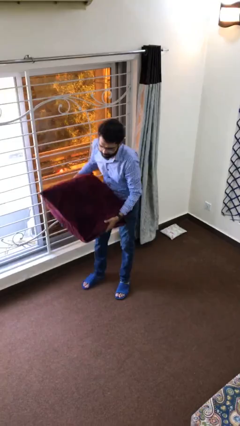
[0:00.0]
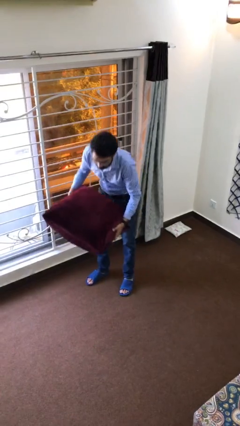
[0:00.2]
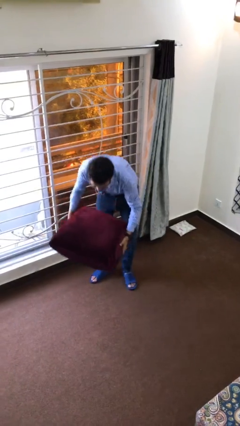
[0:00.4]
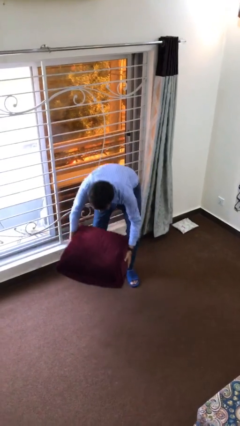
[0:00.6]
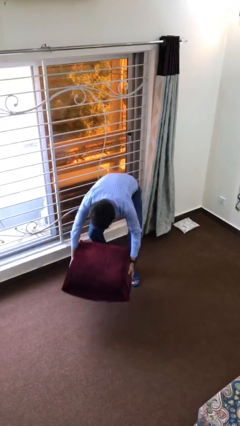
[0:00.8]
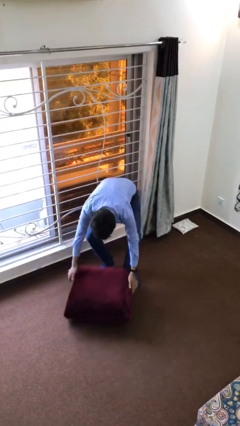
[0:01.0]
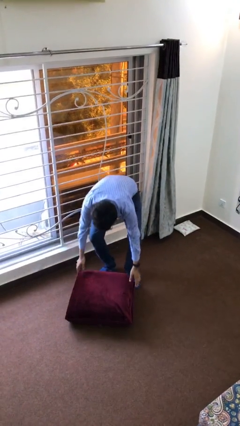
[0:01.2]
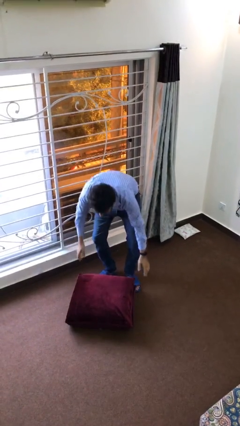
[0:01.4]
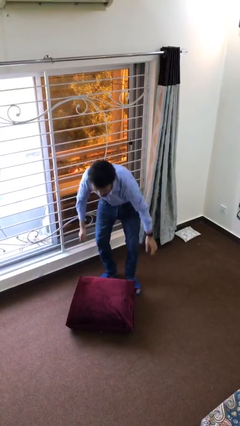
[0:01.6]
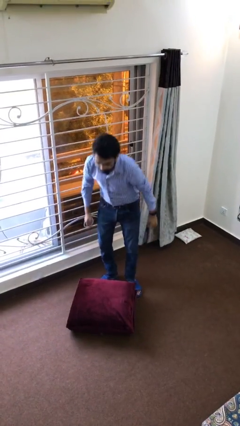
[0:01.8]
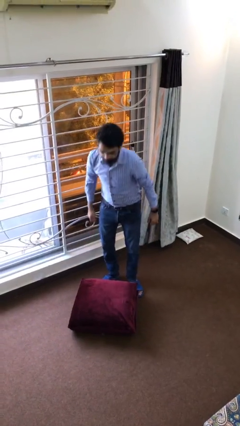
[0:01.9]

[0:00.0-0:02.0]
person puts down object on floor

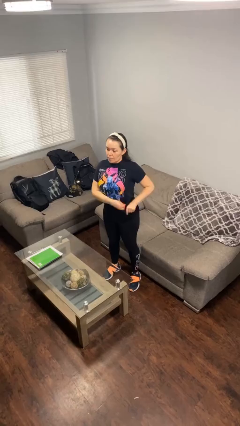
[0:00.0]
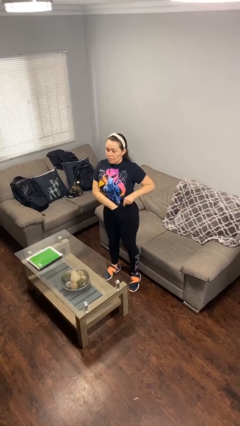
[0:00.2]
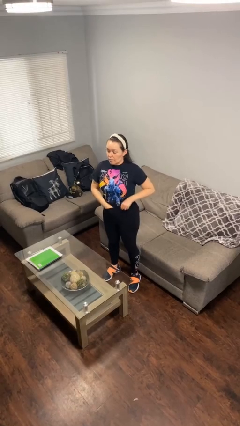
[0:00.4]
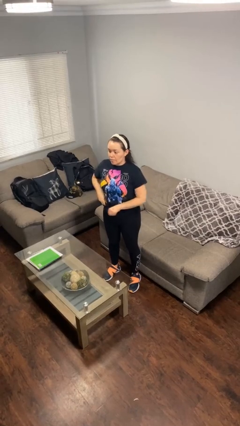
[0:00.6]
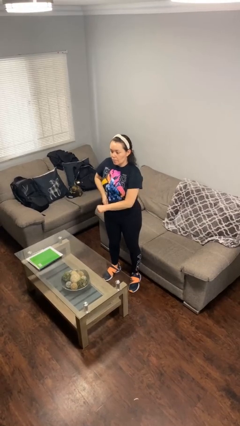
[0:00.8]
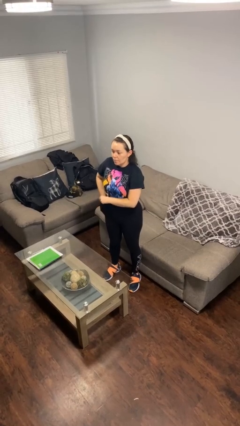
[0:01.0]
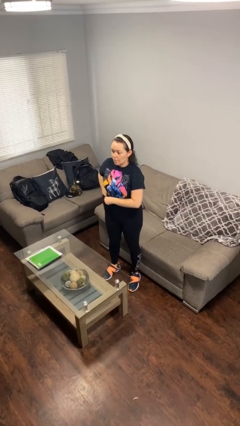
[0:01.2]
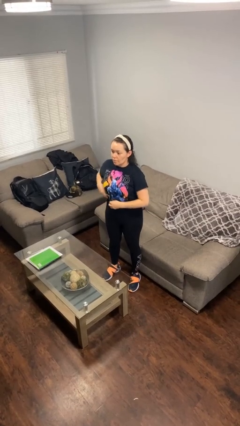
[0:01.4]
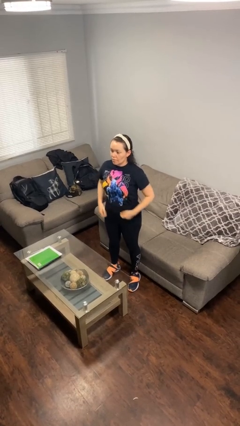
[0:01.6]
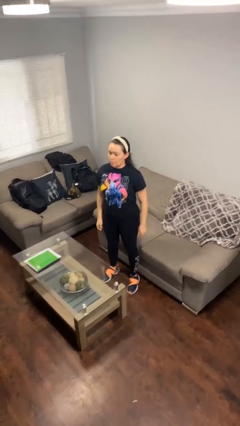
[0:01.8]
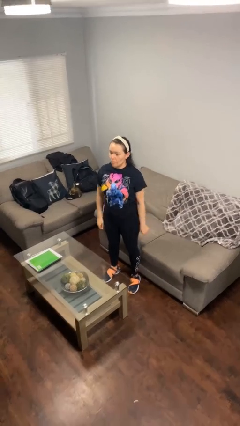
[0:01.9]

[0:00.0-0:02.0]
person tucks in shirt

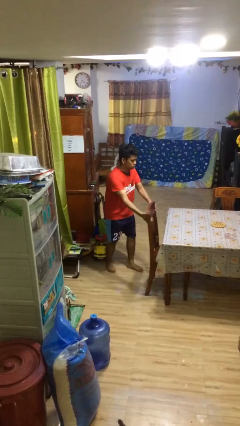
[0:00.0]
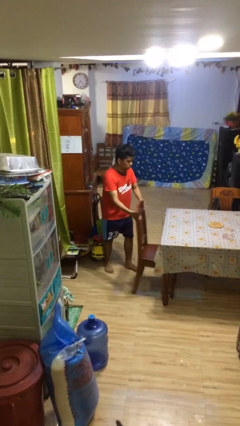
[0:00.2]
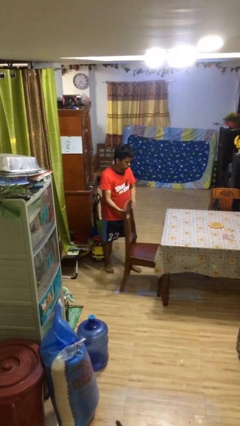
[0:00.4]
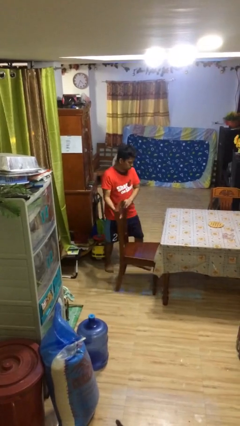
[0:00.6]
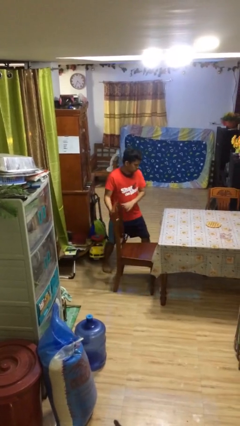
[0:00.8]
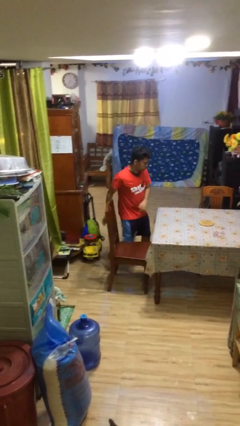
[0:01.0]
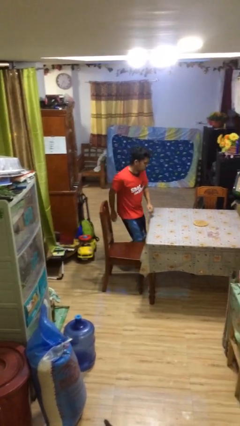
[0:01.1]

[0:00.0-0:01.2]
person stands up

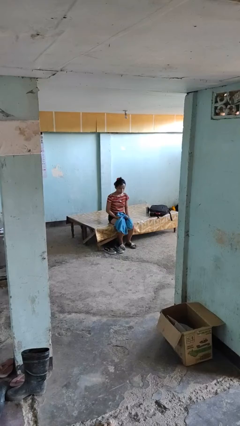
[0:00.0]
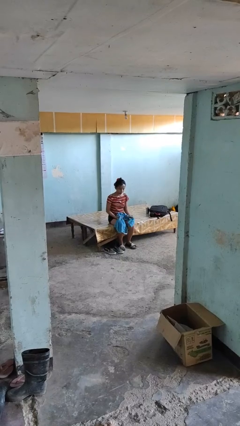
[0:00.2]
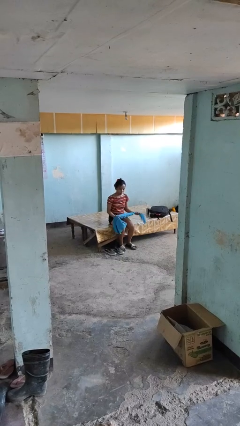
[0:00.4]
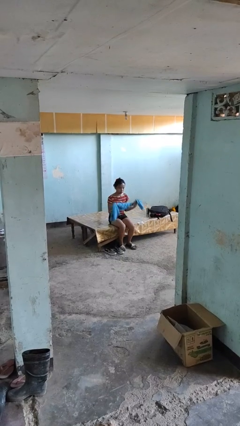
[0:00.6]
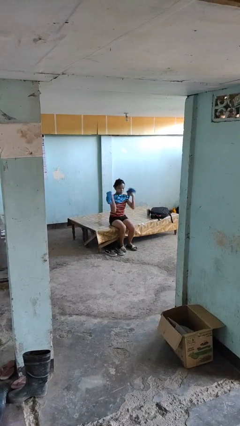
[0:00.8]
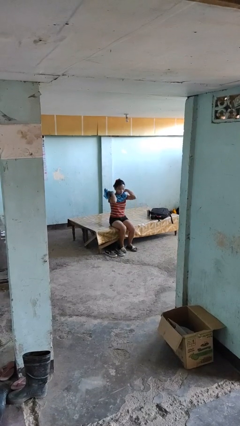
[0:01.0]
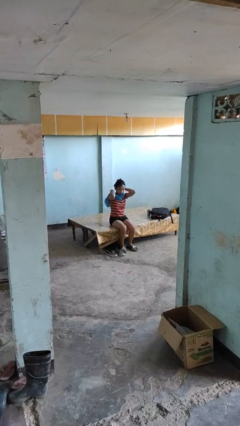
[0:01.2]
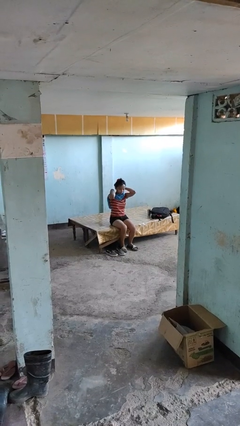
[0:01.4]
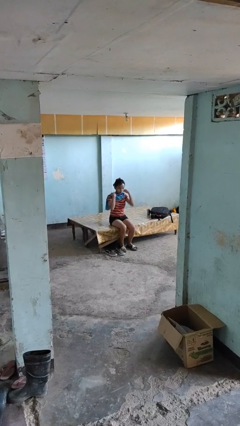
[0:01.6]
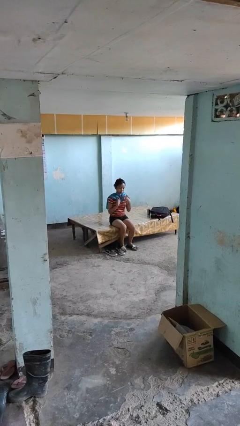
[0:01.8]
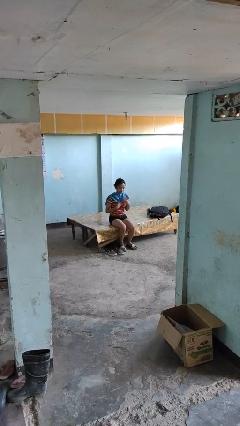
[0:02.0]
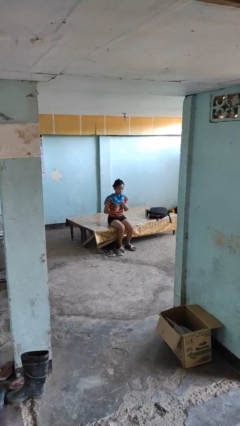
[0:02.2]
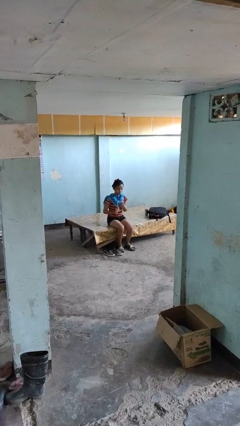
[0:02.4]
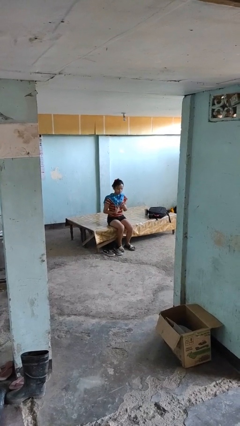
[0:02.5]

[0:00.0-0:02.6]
person puts on scarf

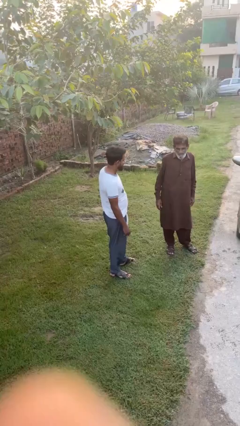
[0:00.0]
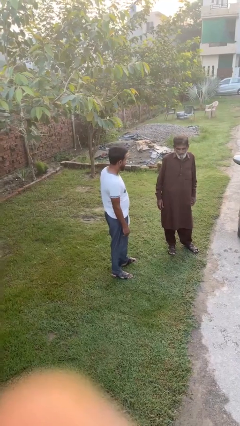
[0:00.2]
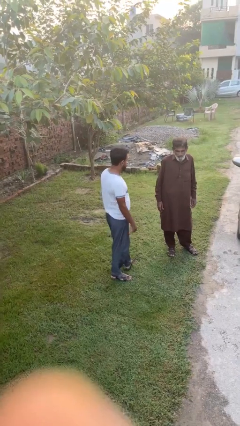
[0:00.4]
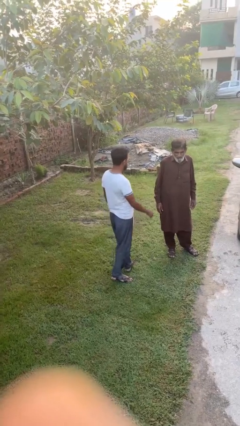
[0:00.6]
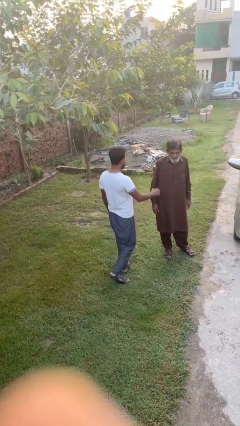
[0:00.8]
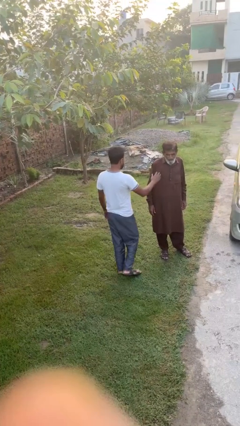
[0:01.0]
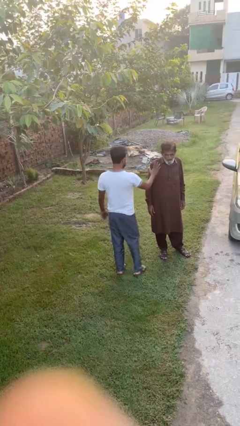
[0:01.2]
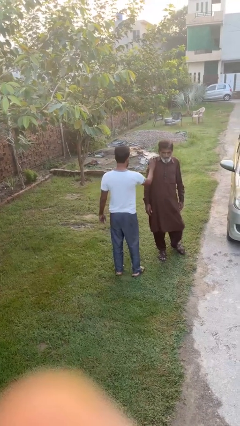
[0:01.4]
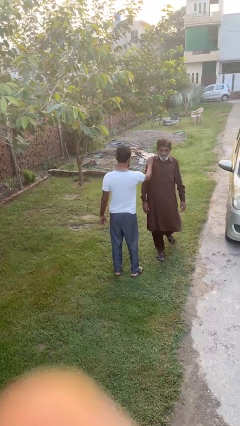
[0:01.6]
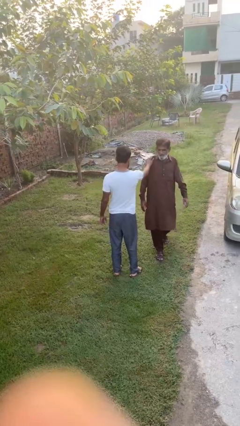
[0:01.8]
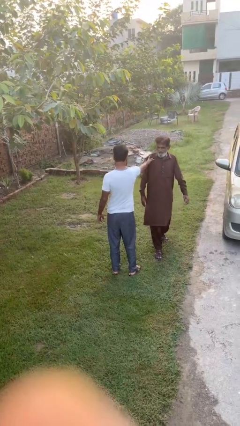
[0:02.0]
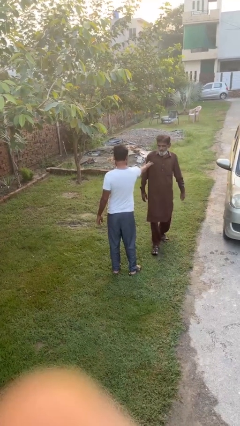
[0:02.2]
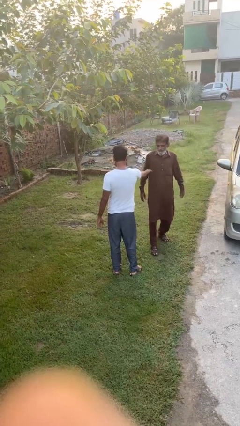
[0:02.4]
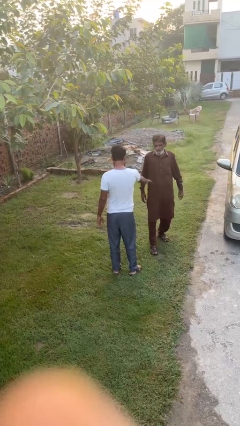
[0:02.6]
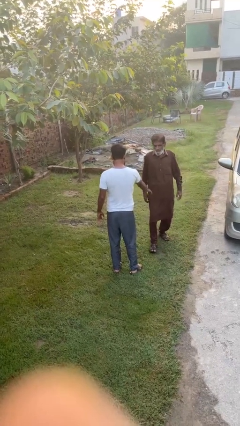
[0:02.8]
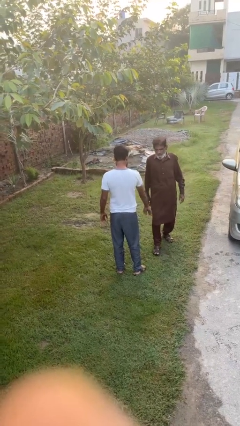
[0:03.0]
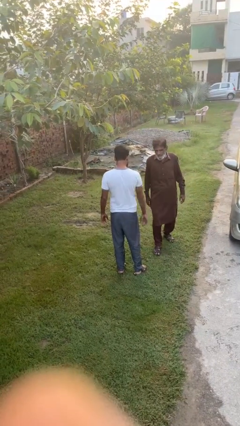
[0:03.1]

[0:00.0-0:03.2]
person shoves person

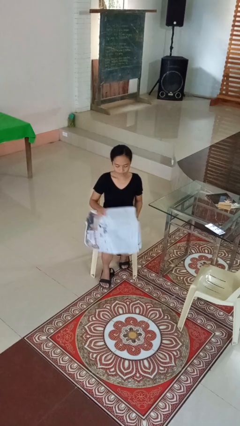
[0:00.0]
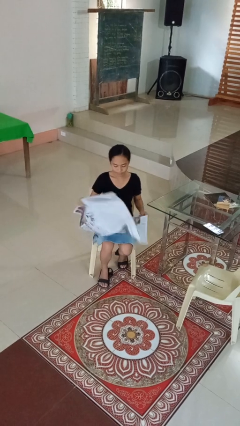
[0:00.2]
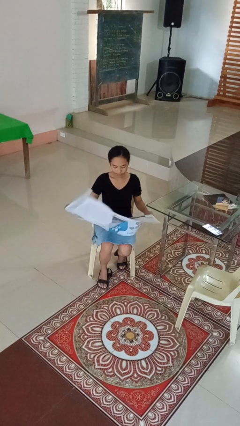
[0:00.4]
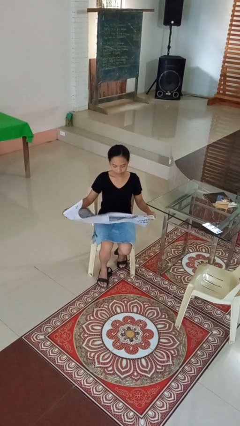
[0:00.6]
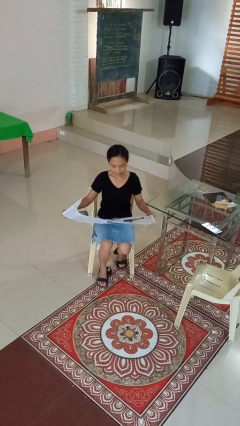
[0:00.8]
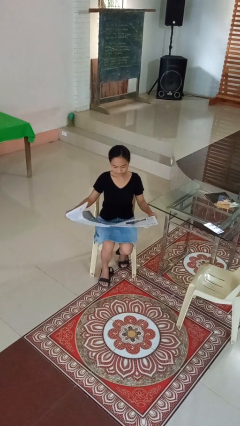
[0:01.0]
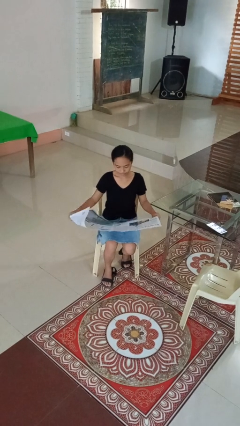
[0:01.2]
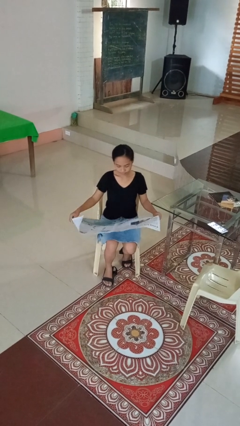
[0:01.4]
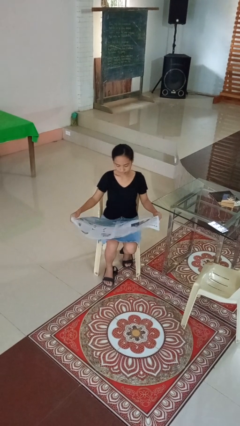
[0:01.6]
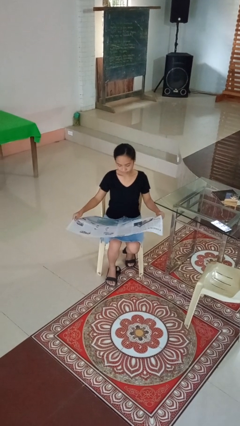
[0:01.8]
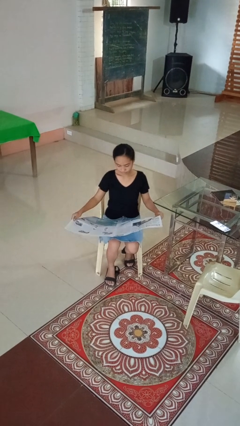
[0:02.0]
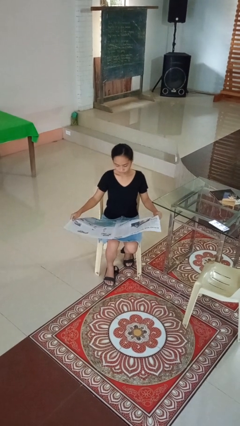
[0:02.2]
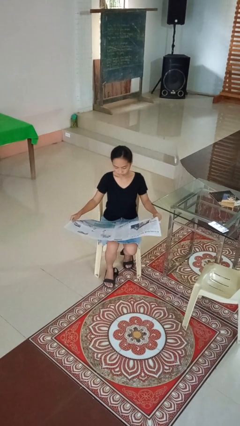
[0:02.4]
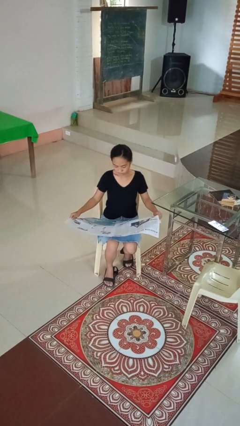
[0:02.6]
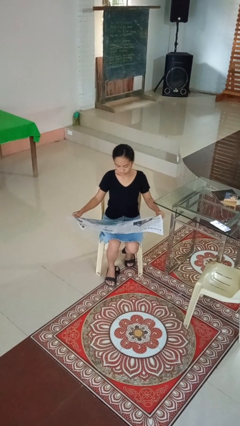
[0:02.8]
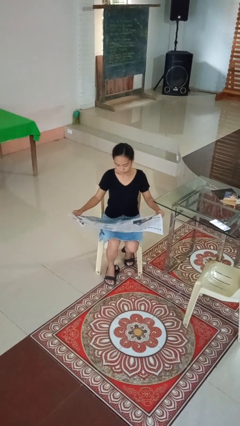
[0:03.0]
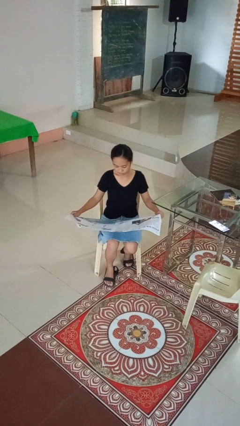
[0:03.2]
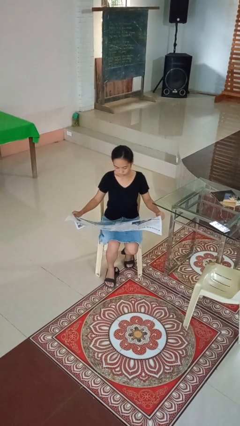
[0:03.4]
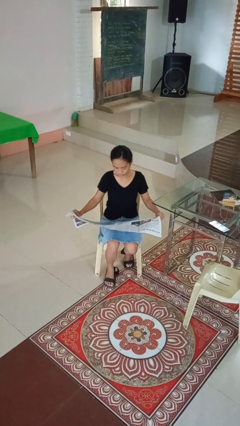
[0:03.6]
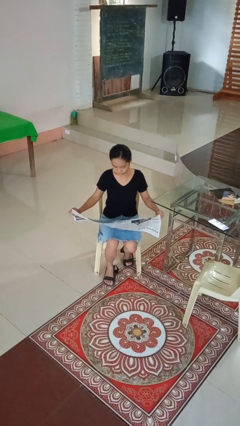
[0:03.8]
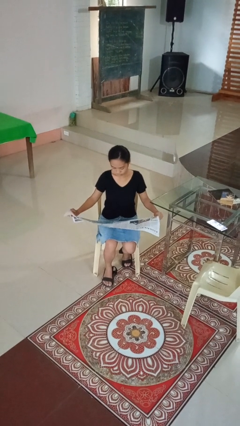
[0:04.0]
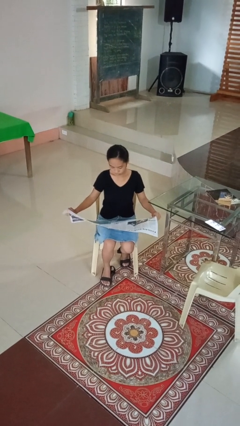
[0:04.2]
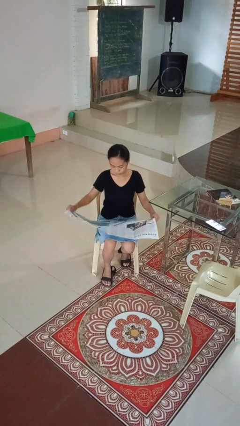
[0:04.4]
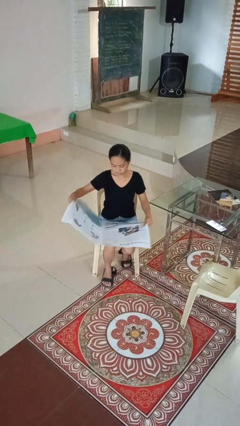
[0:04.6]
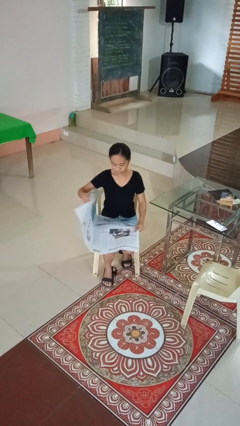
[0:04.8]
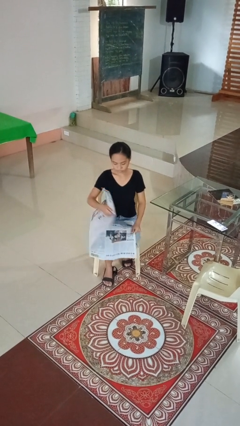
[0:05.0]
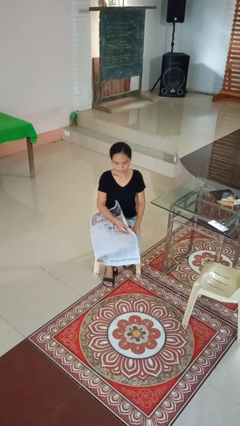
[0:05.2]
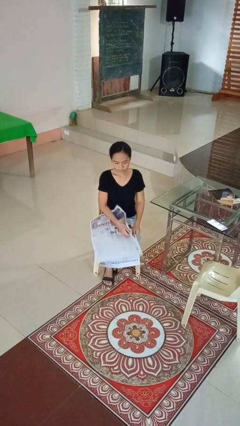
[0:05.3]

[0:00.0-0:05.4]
person reads newspaper

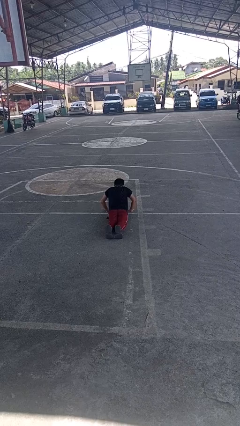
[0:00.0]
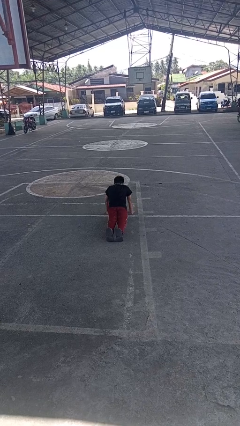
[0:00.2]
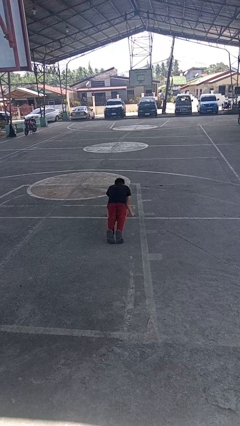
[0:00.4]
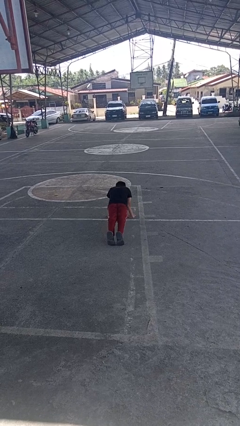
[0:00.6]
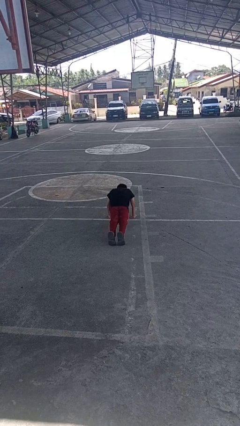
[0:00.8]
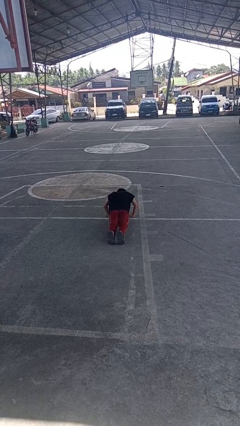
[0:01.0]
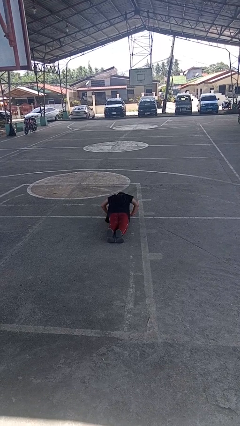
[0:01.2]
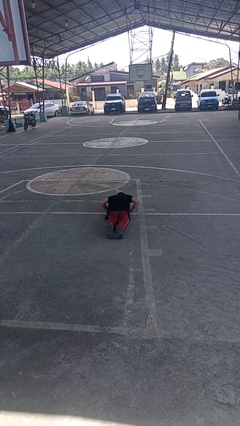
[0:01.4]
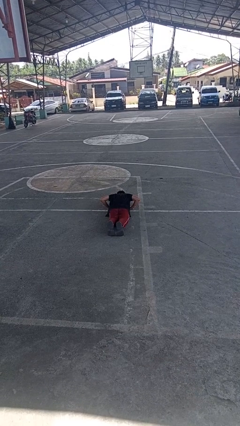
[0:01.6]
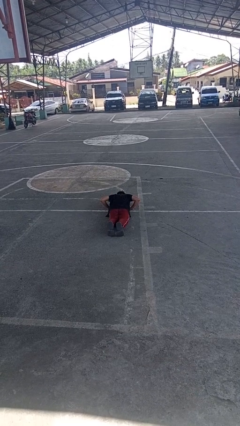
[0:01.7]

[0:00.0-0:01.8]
person exercises with pushup
